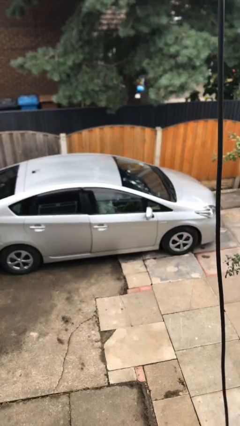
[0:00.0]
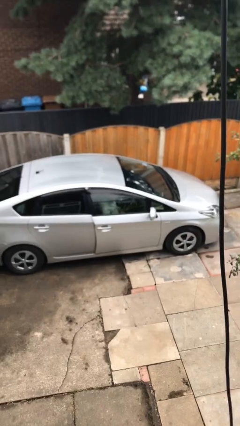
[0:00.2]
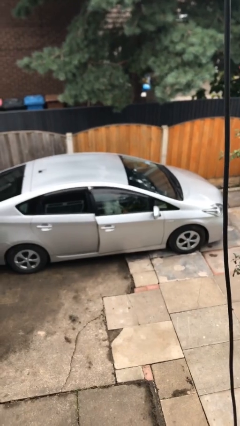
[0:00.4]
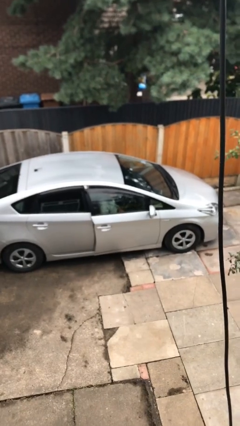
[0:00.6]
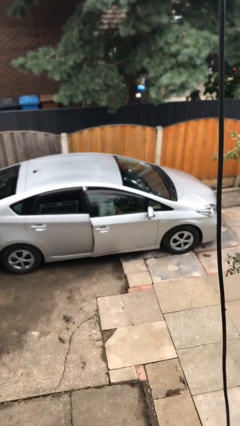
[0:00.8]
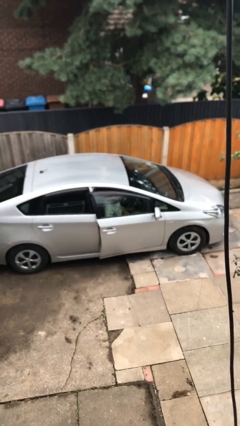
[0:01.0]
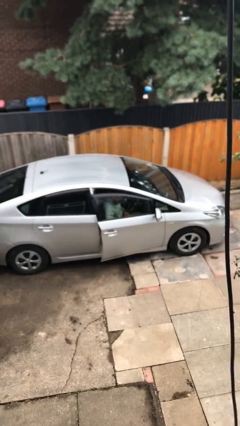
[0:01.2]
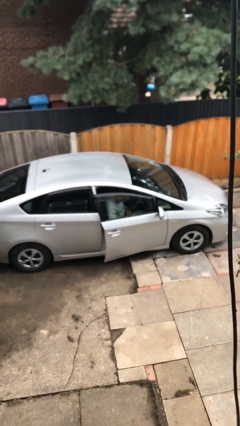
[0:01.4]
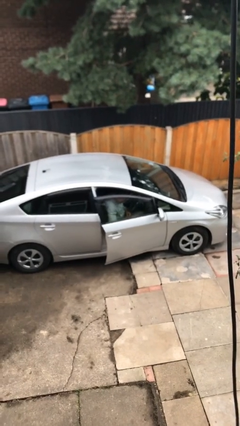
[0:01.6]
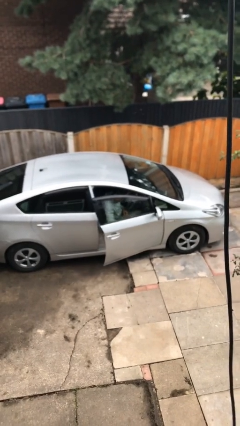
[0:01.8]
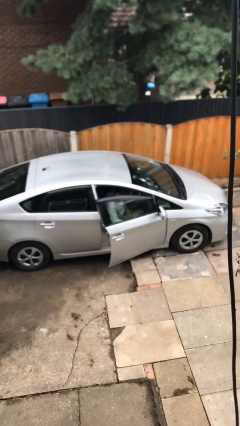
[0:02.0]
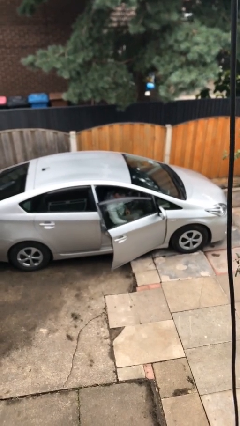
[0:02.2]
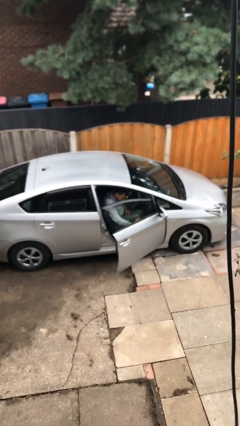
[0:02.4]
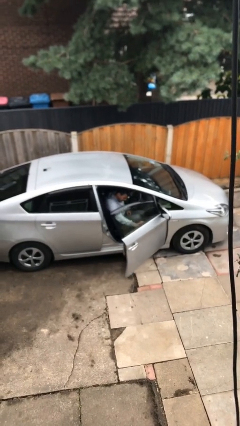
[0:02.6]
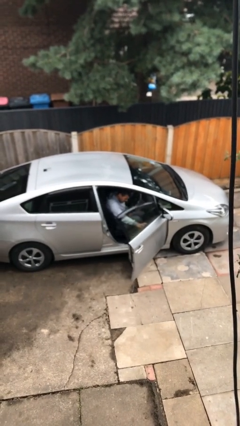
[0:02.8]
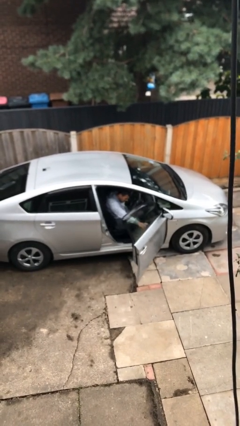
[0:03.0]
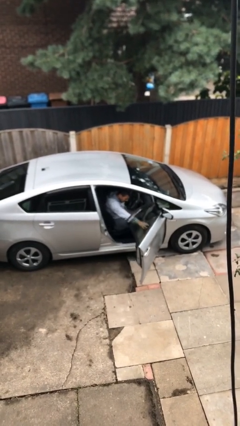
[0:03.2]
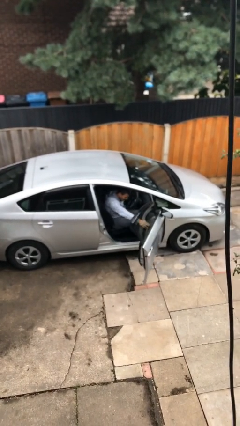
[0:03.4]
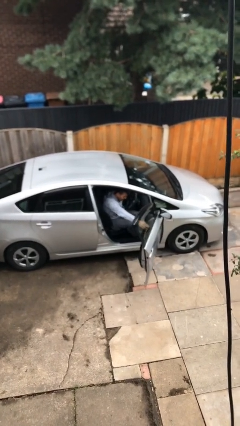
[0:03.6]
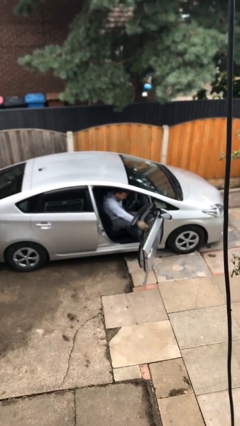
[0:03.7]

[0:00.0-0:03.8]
person opens car door

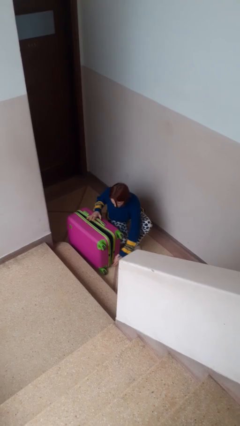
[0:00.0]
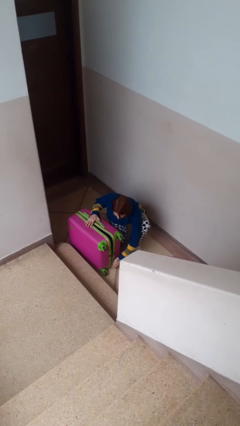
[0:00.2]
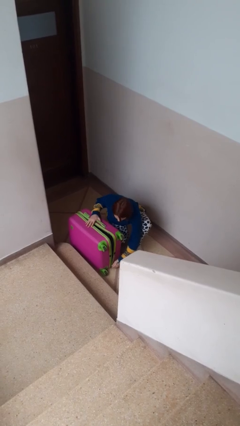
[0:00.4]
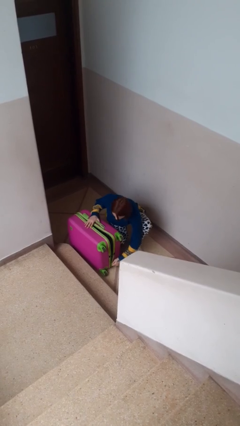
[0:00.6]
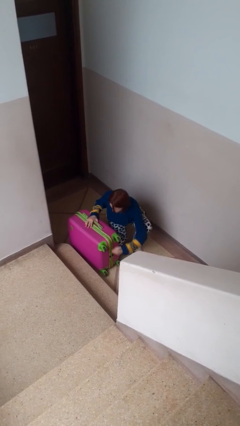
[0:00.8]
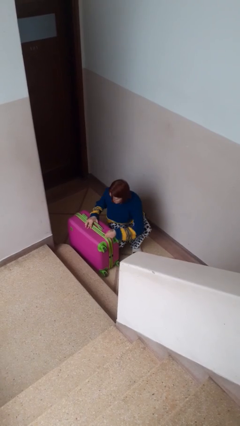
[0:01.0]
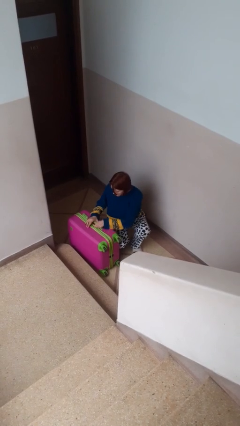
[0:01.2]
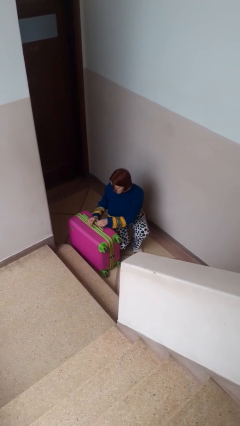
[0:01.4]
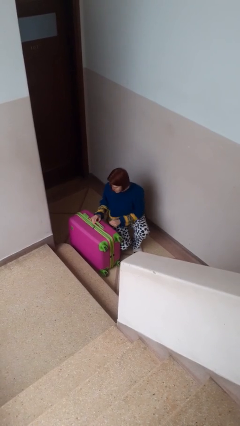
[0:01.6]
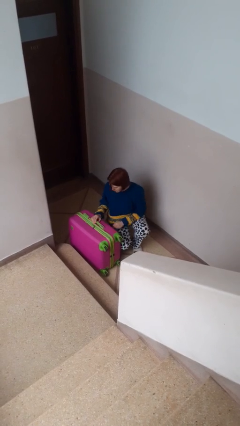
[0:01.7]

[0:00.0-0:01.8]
person closes suitcase

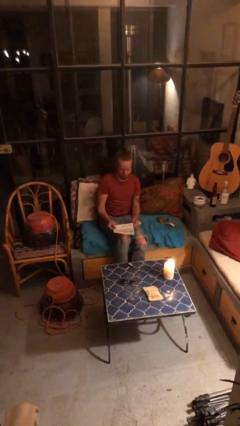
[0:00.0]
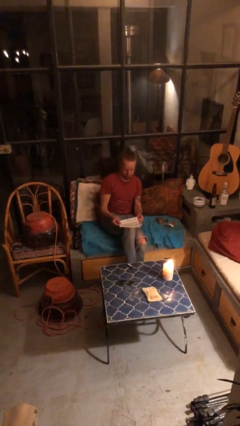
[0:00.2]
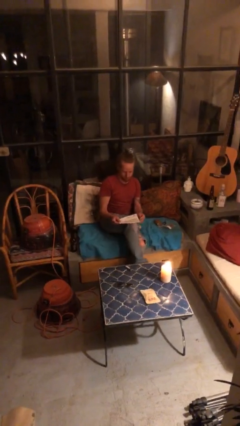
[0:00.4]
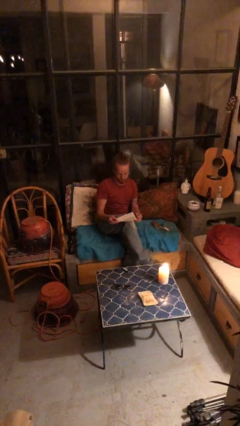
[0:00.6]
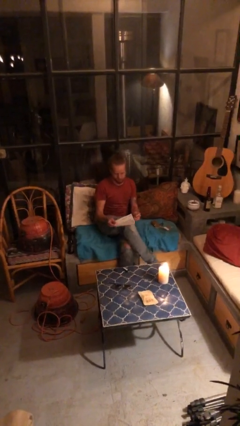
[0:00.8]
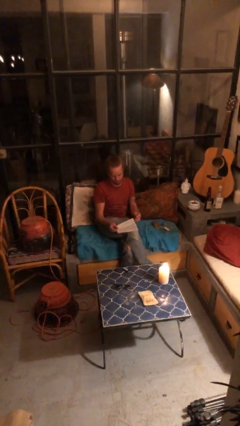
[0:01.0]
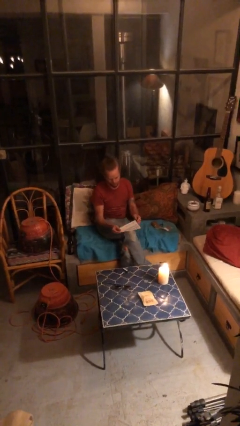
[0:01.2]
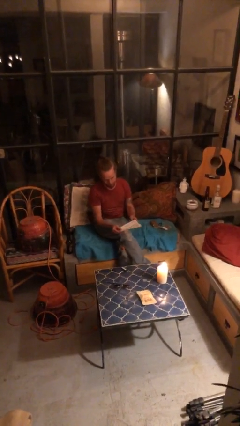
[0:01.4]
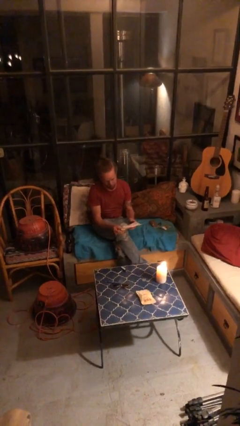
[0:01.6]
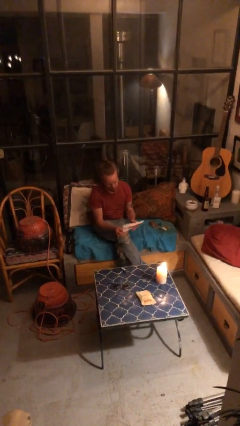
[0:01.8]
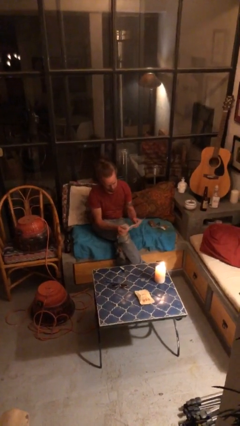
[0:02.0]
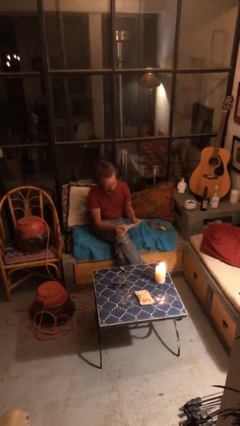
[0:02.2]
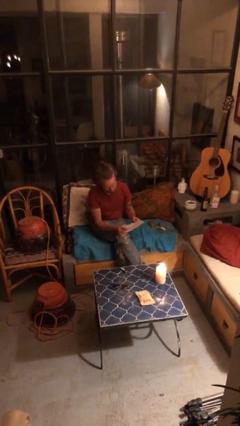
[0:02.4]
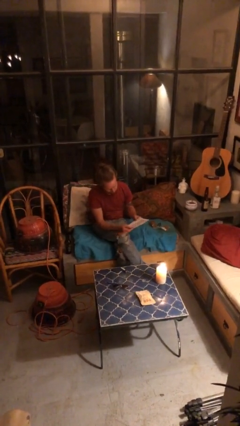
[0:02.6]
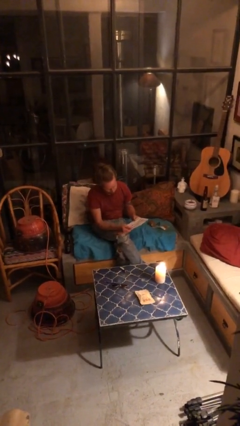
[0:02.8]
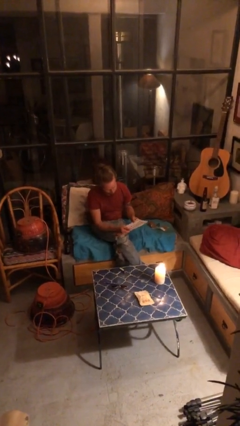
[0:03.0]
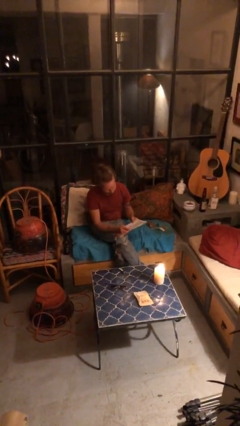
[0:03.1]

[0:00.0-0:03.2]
person reads document

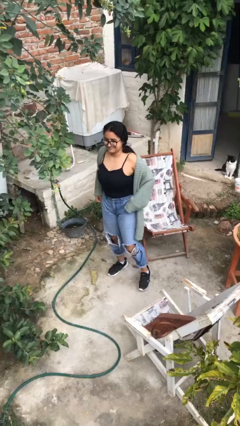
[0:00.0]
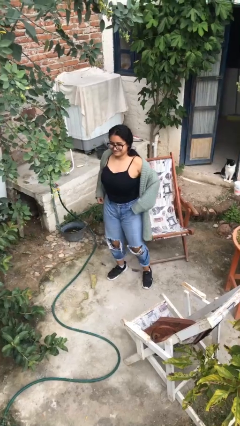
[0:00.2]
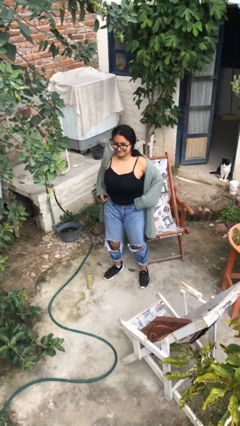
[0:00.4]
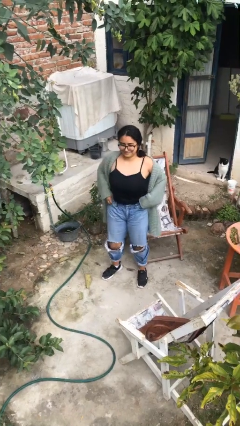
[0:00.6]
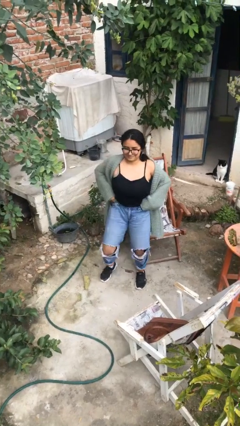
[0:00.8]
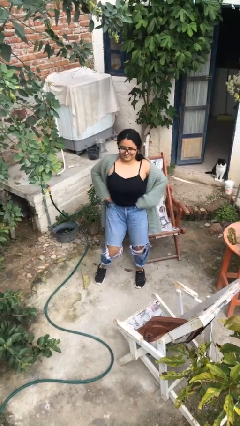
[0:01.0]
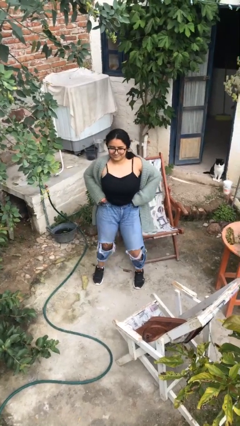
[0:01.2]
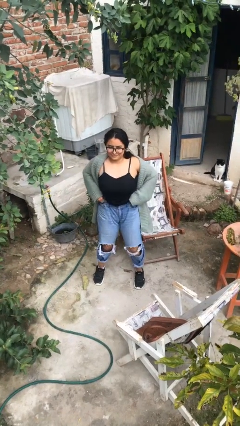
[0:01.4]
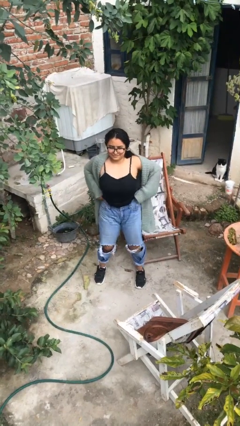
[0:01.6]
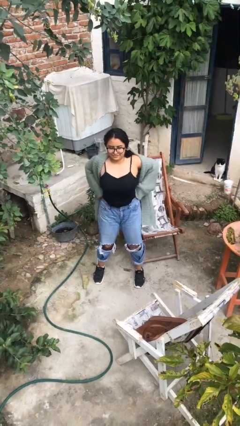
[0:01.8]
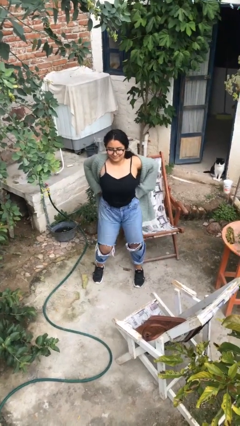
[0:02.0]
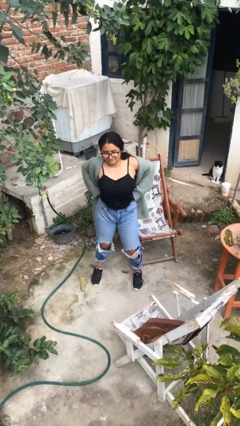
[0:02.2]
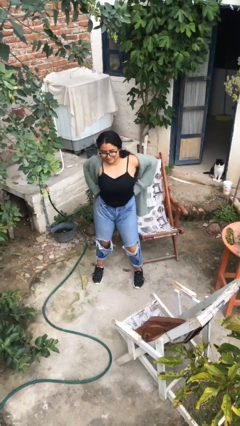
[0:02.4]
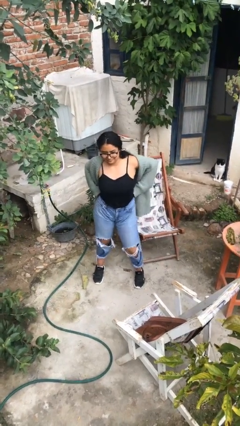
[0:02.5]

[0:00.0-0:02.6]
person hikes up pants

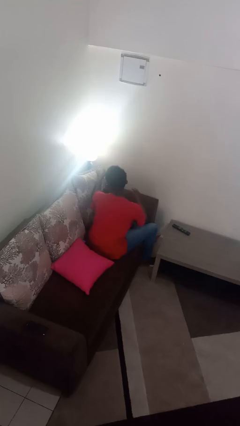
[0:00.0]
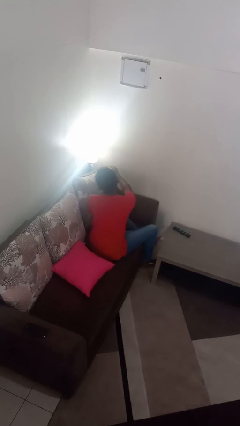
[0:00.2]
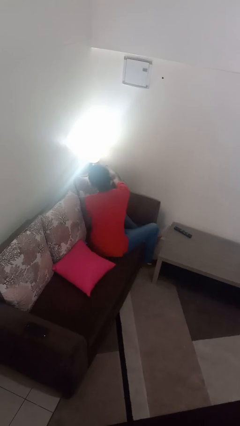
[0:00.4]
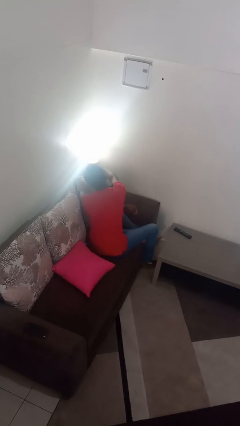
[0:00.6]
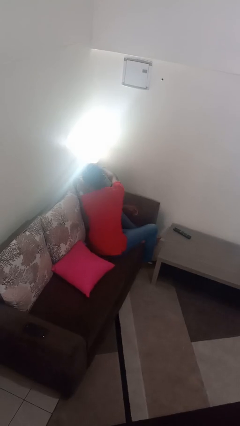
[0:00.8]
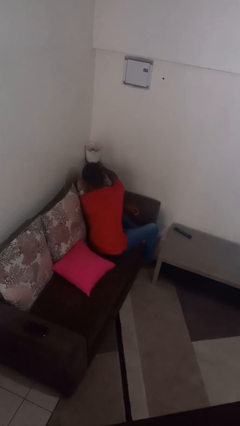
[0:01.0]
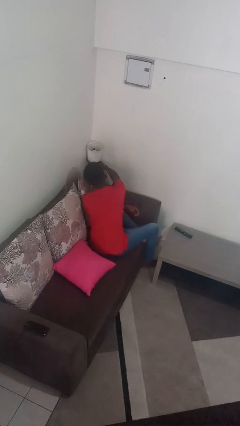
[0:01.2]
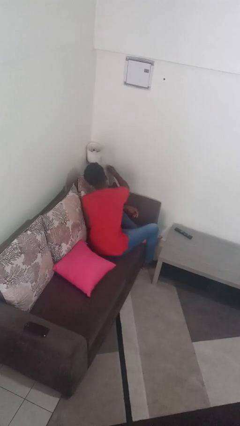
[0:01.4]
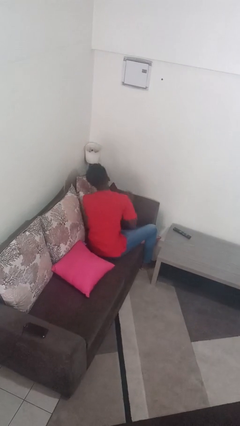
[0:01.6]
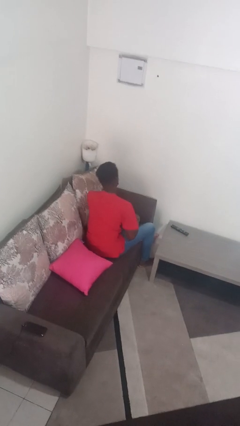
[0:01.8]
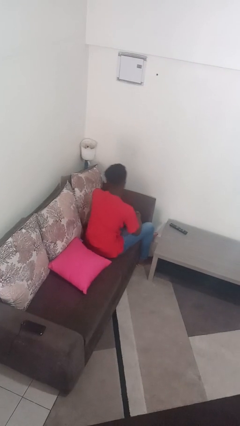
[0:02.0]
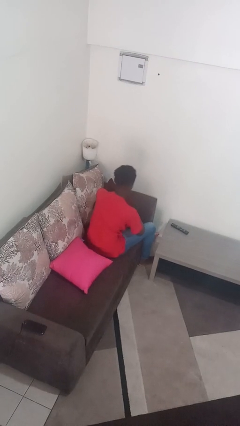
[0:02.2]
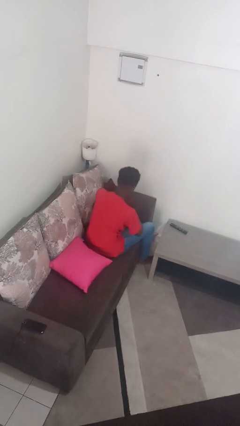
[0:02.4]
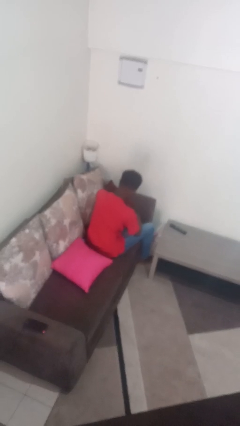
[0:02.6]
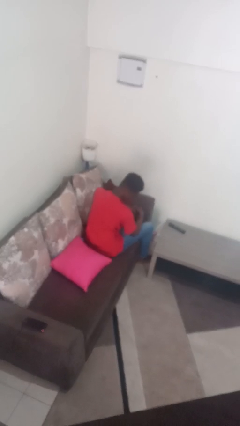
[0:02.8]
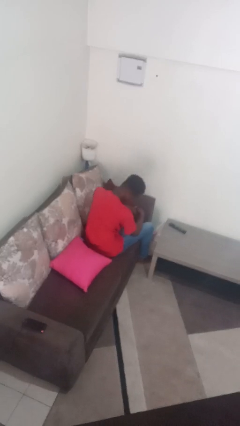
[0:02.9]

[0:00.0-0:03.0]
person turns off lamp

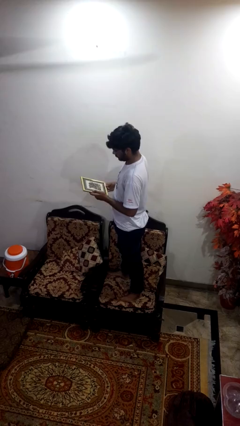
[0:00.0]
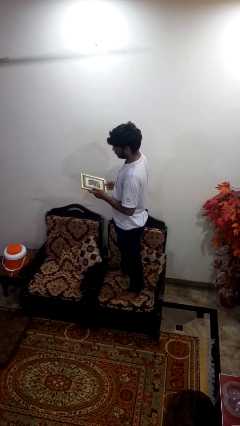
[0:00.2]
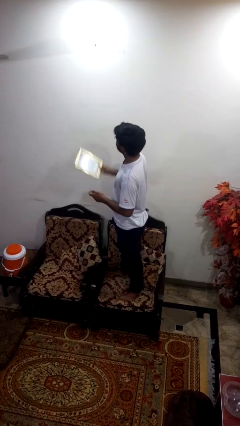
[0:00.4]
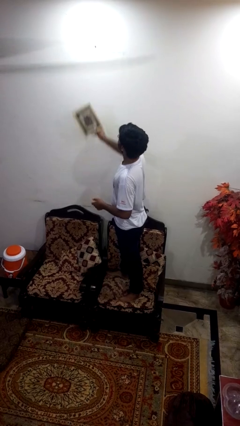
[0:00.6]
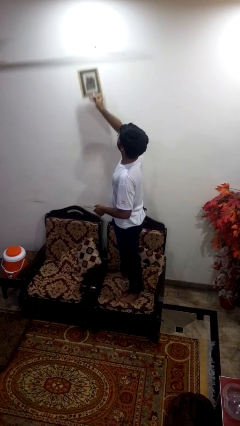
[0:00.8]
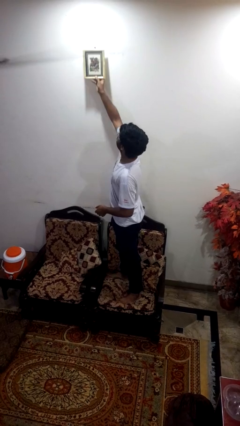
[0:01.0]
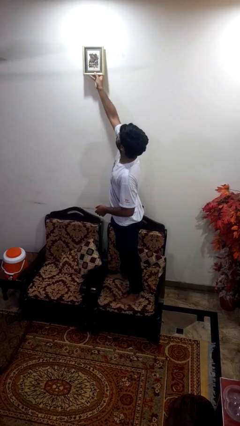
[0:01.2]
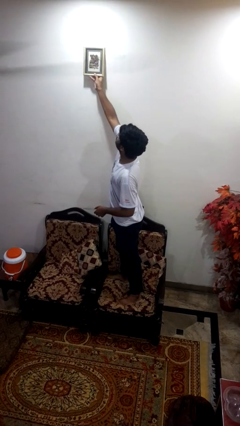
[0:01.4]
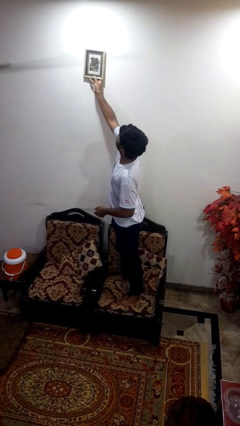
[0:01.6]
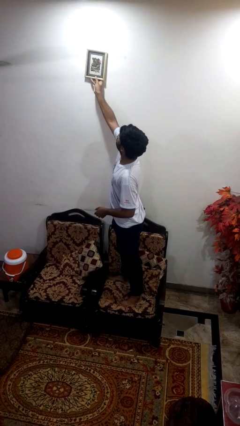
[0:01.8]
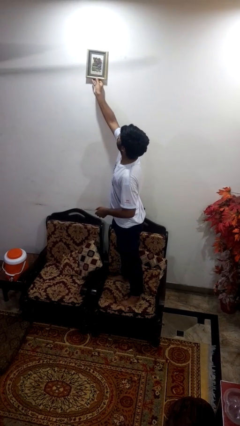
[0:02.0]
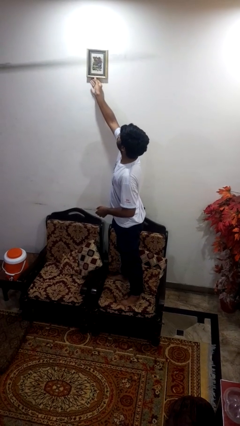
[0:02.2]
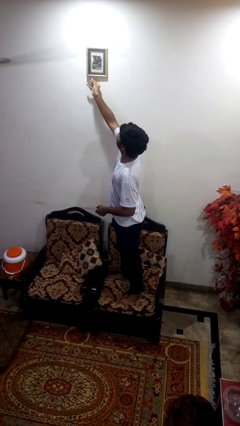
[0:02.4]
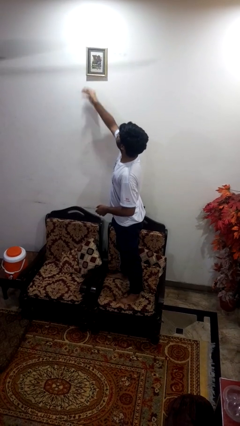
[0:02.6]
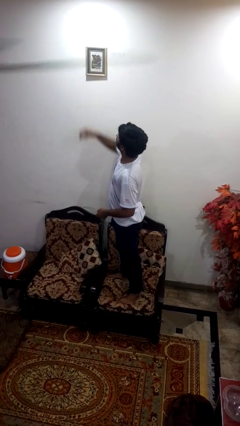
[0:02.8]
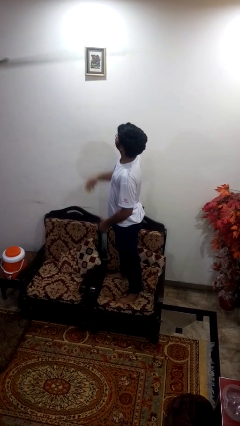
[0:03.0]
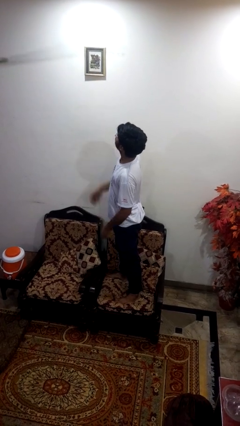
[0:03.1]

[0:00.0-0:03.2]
person puts up picture frame
